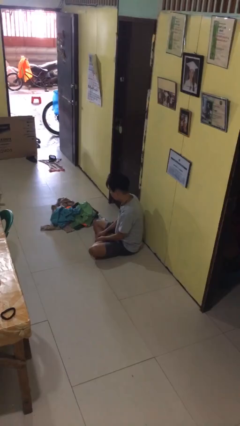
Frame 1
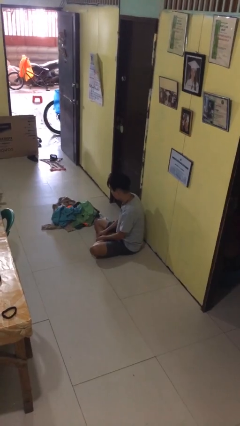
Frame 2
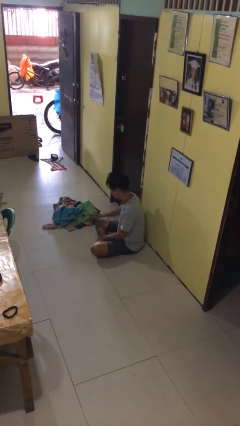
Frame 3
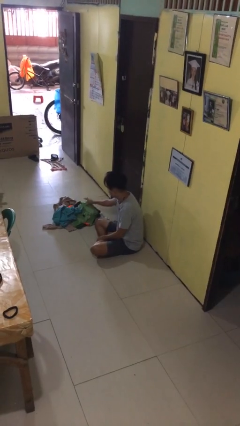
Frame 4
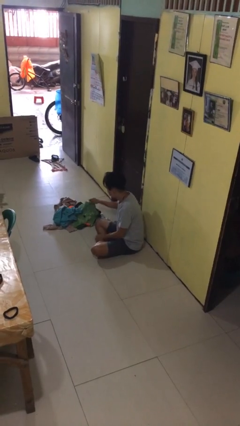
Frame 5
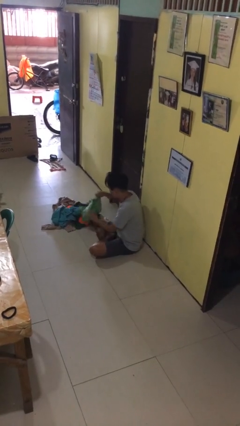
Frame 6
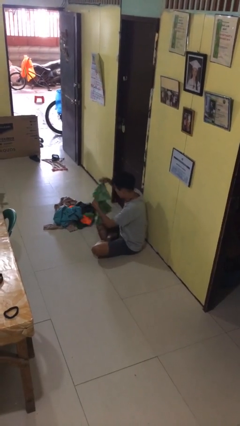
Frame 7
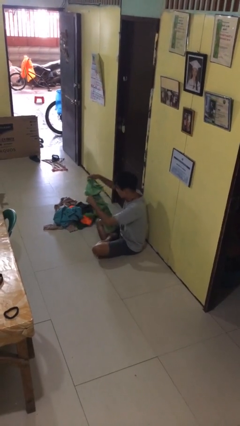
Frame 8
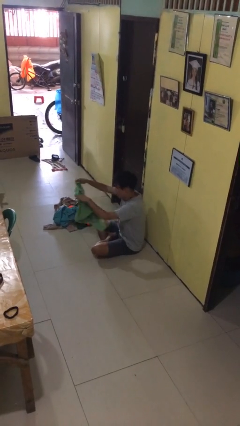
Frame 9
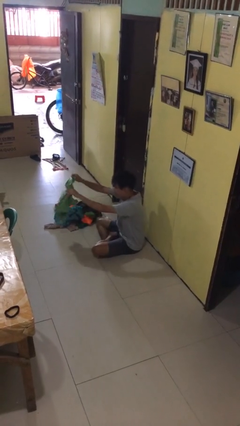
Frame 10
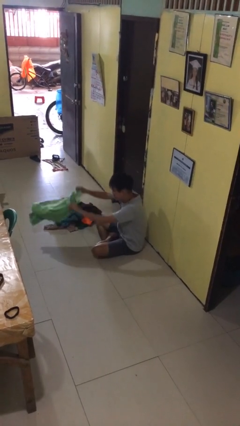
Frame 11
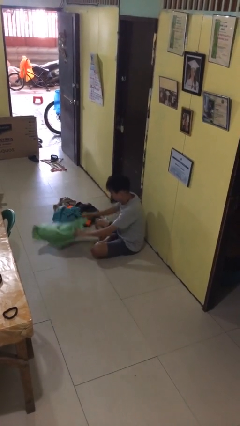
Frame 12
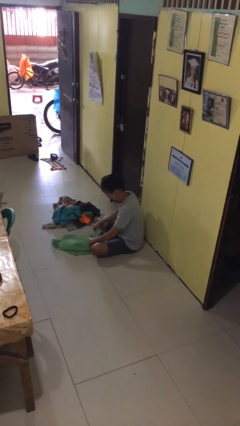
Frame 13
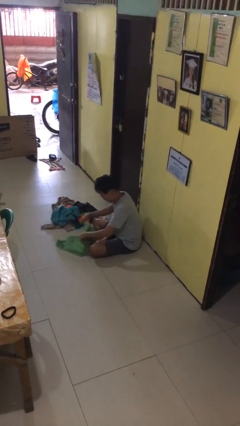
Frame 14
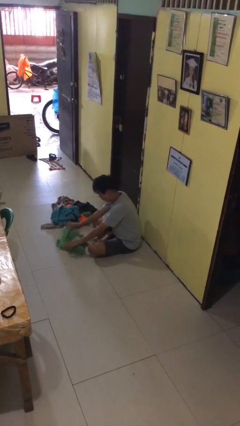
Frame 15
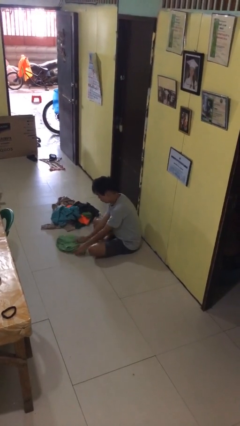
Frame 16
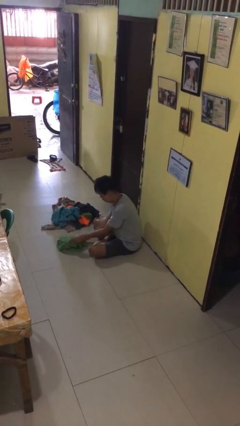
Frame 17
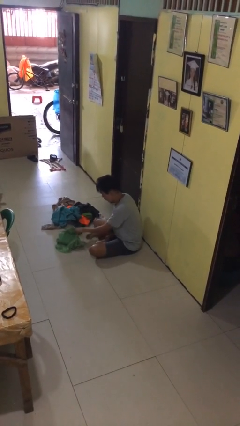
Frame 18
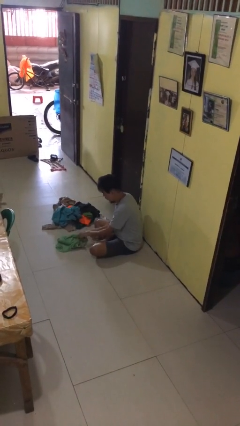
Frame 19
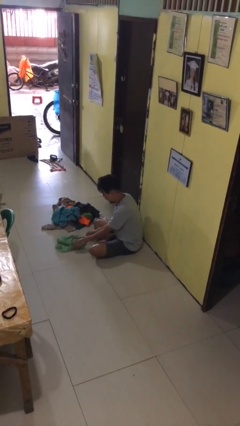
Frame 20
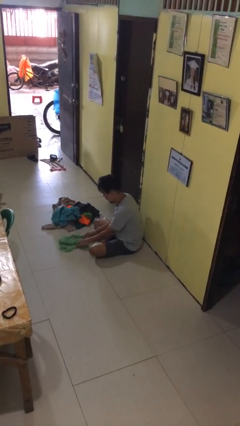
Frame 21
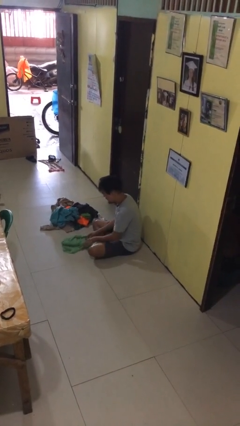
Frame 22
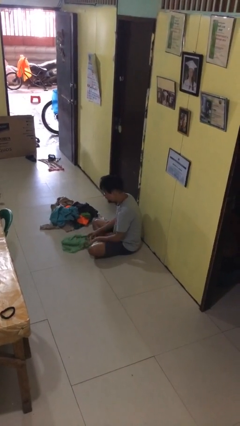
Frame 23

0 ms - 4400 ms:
person folds shirt

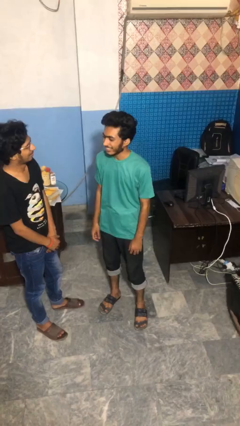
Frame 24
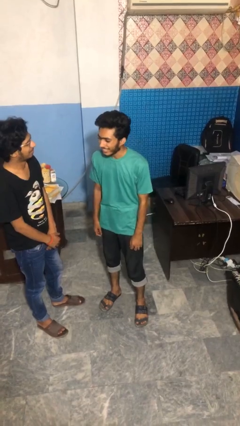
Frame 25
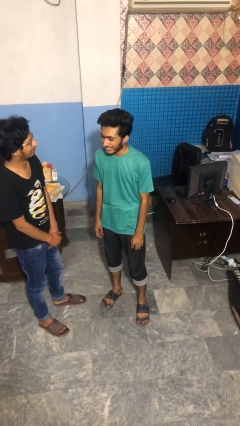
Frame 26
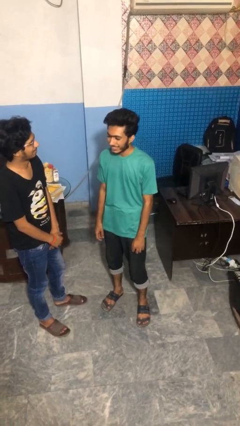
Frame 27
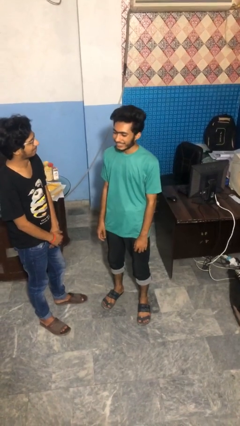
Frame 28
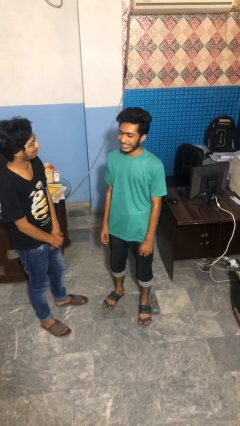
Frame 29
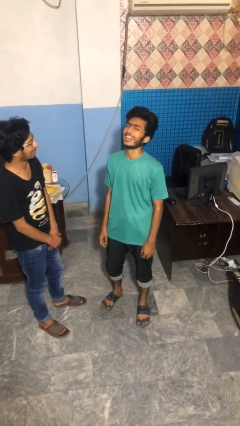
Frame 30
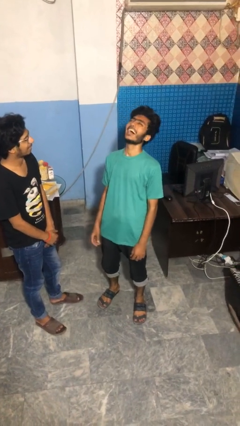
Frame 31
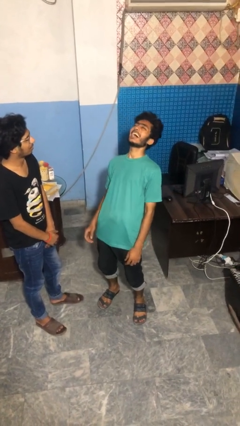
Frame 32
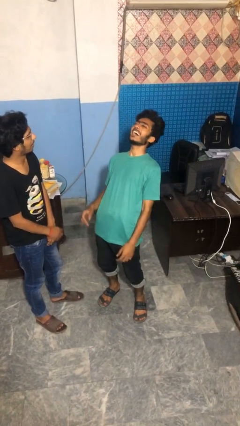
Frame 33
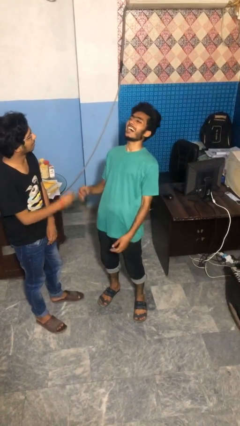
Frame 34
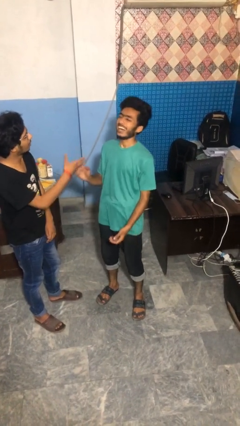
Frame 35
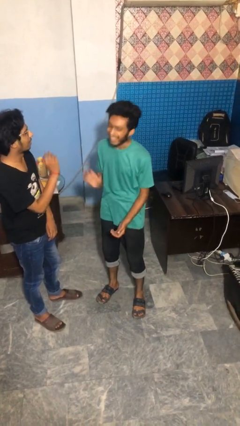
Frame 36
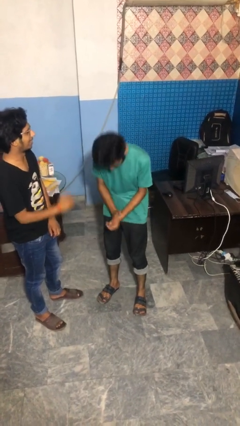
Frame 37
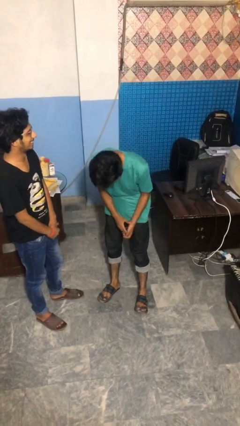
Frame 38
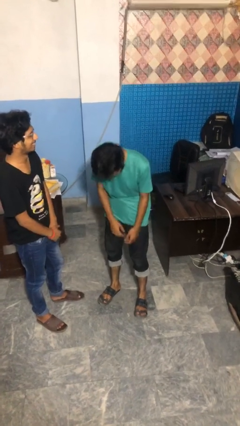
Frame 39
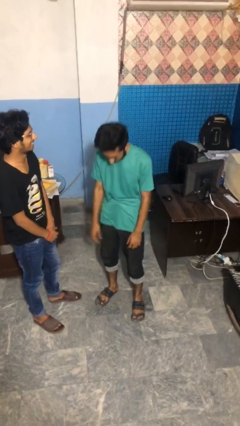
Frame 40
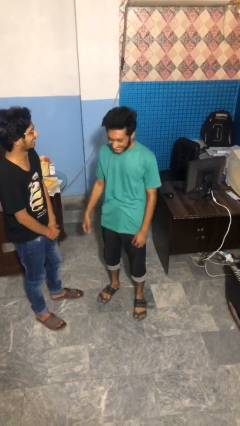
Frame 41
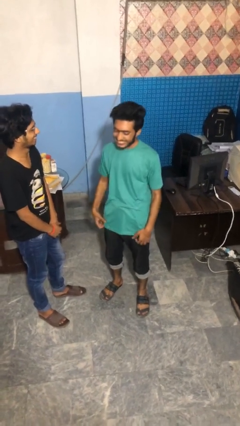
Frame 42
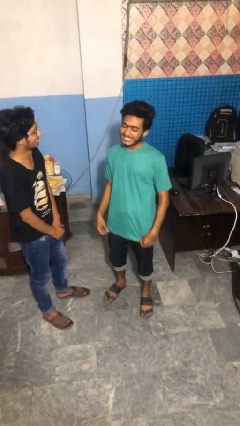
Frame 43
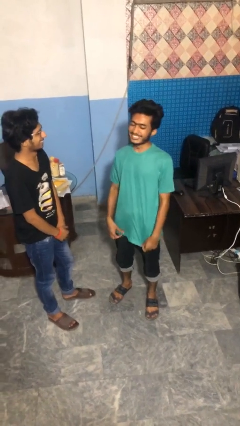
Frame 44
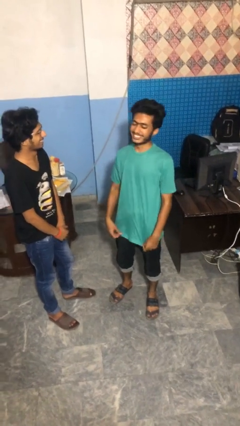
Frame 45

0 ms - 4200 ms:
person laughs with person

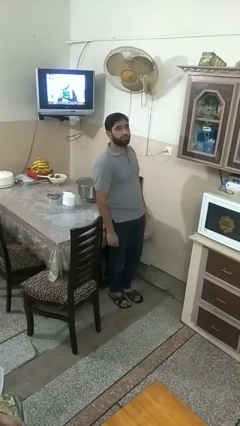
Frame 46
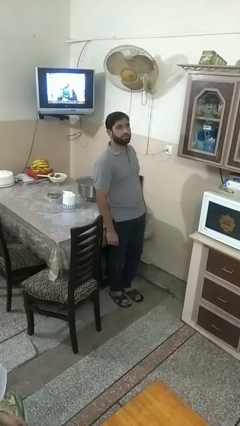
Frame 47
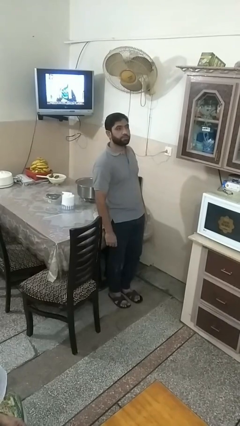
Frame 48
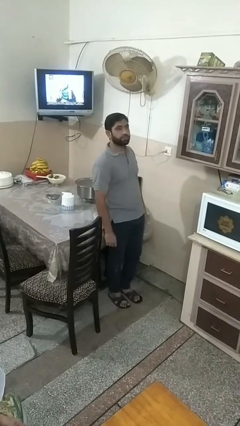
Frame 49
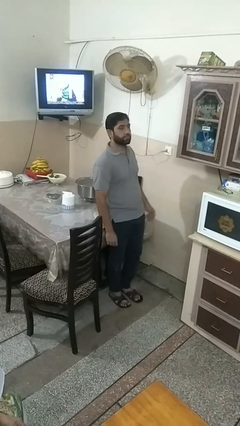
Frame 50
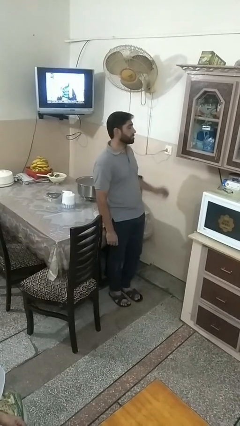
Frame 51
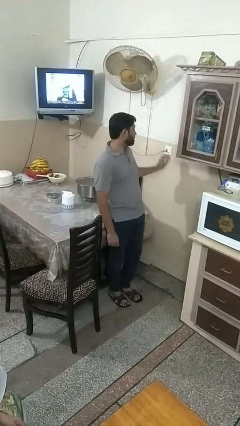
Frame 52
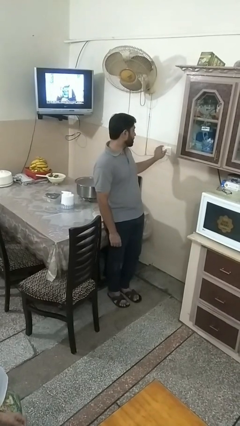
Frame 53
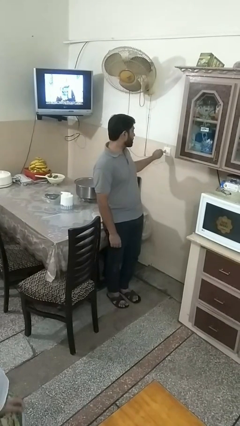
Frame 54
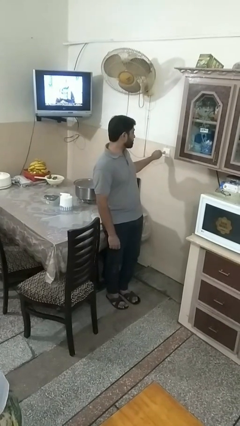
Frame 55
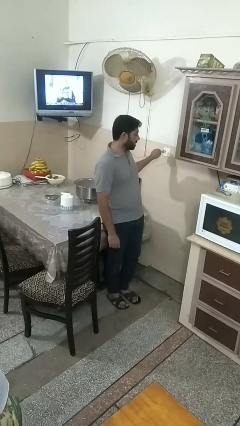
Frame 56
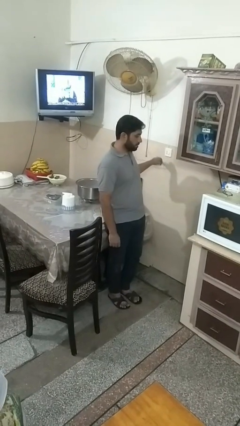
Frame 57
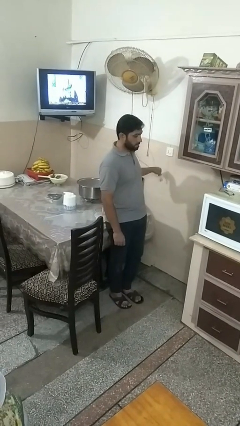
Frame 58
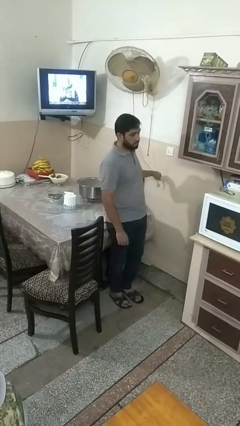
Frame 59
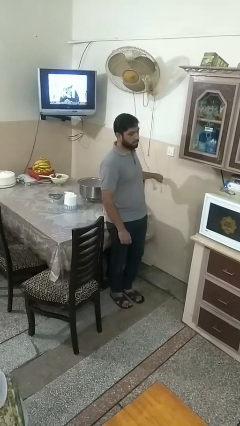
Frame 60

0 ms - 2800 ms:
person unplugs from electrical socket

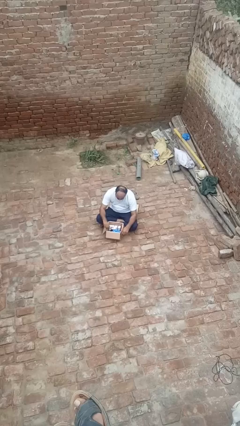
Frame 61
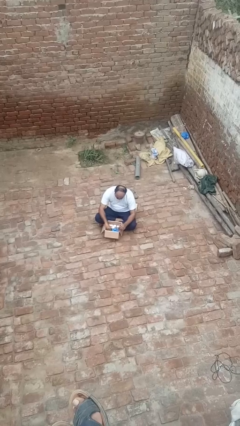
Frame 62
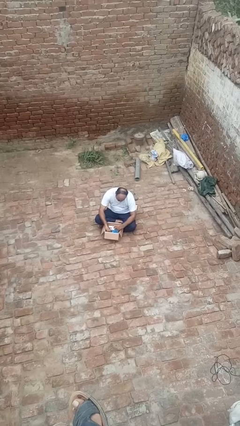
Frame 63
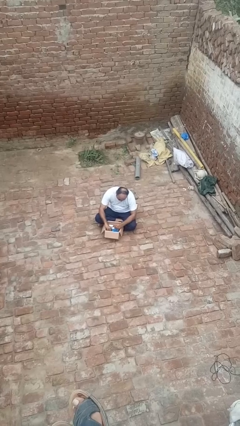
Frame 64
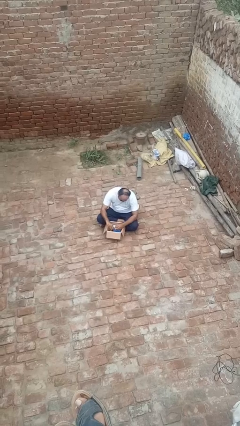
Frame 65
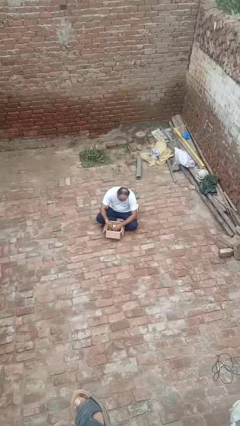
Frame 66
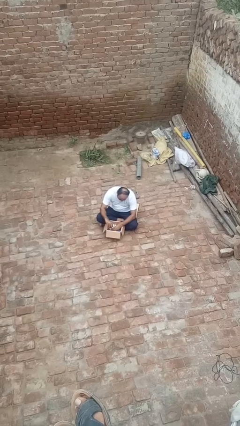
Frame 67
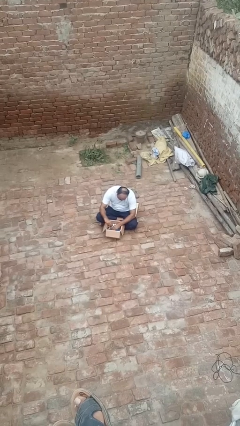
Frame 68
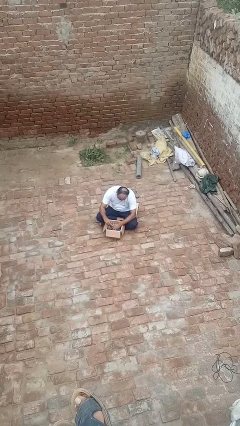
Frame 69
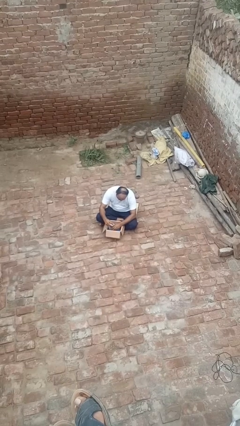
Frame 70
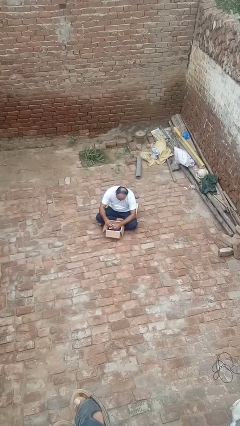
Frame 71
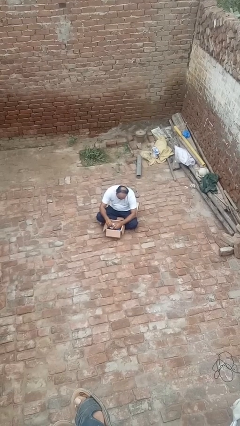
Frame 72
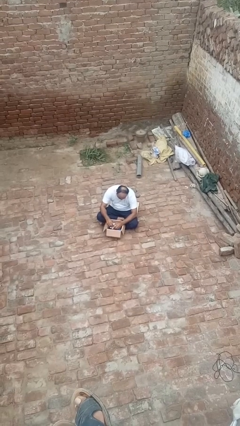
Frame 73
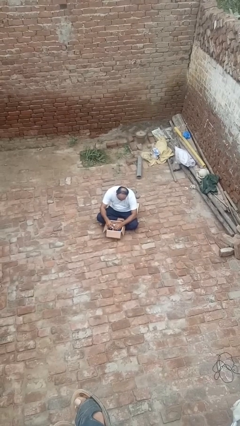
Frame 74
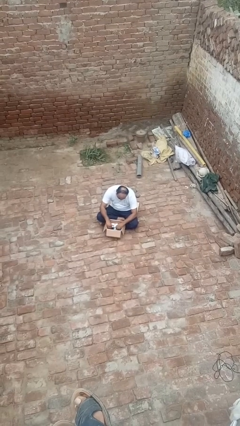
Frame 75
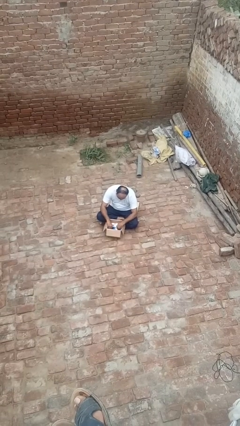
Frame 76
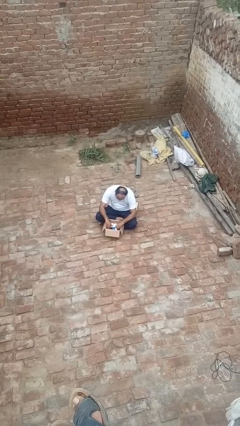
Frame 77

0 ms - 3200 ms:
person searches in box

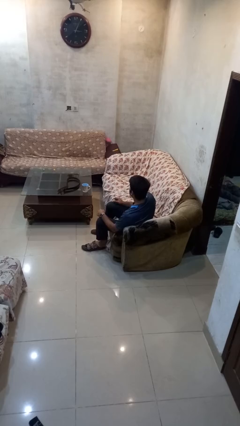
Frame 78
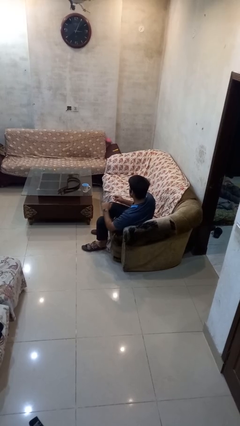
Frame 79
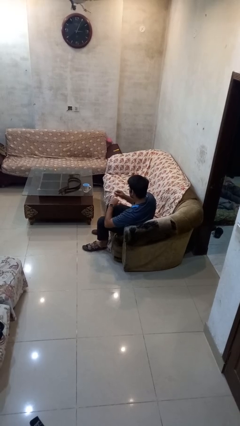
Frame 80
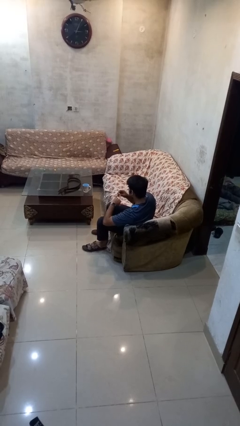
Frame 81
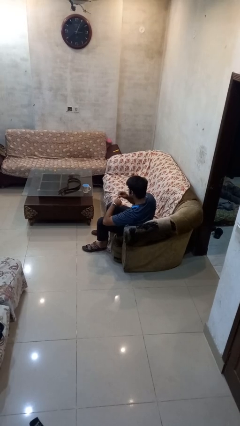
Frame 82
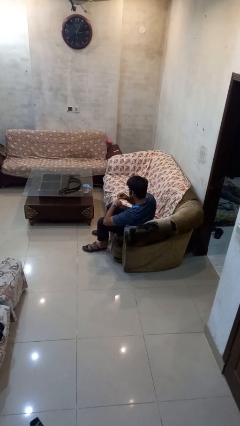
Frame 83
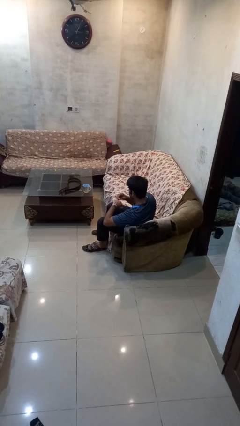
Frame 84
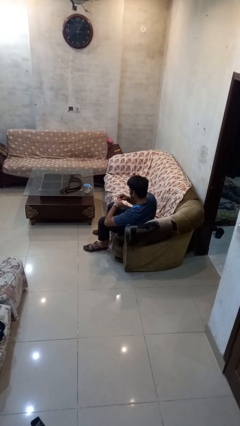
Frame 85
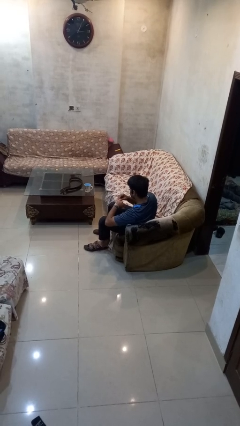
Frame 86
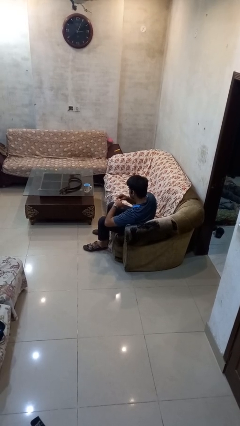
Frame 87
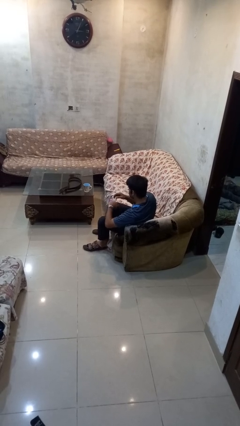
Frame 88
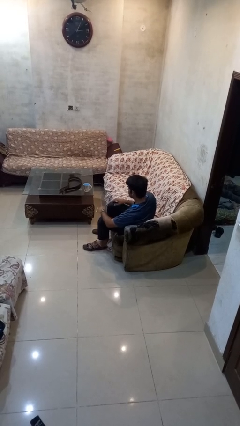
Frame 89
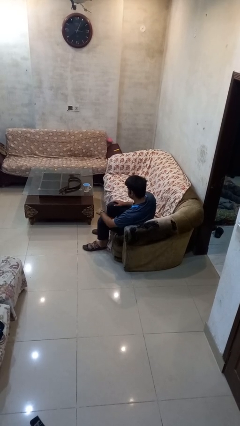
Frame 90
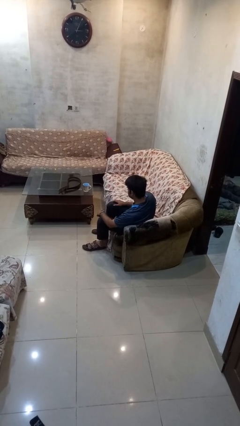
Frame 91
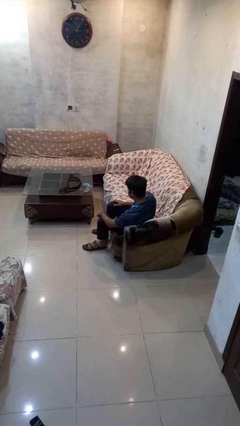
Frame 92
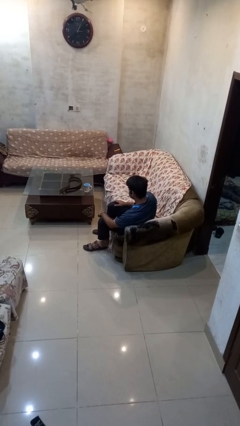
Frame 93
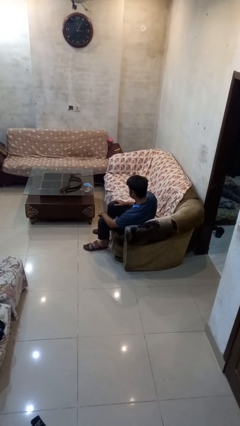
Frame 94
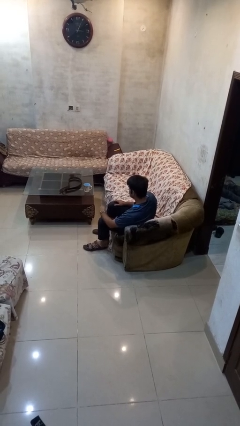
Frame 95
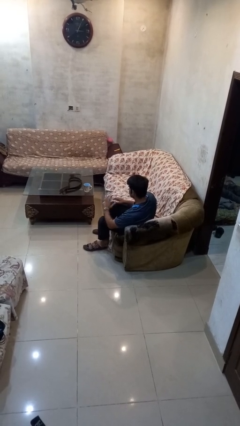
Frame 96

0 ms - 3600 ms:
person puts on ring
